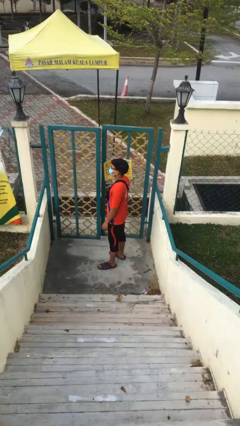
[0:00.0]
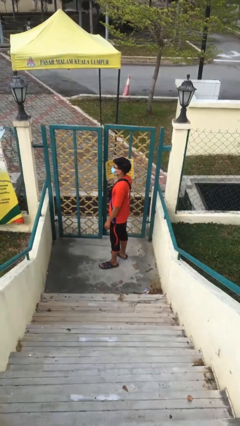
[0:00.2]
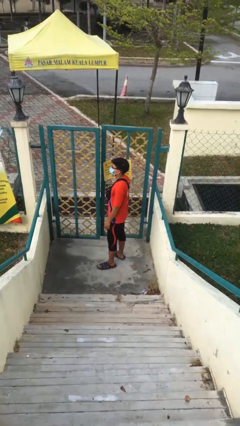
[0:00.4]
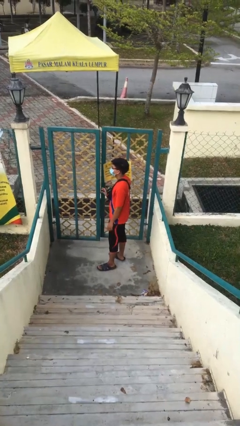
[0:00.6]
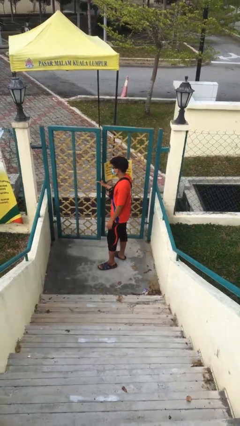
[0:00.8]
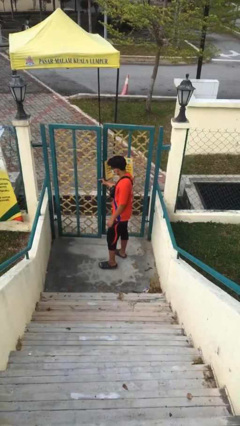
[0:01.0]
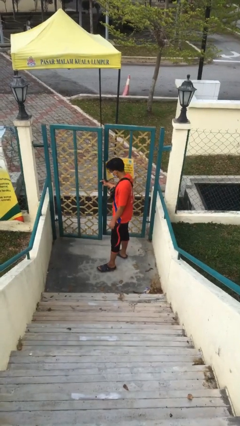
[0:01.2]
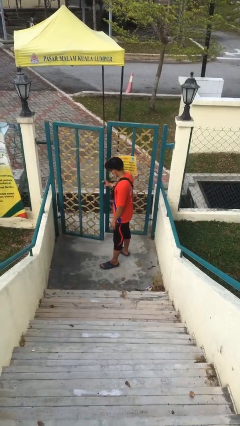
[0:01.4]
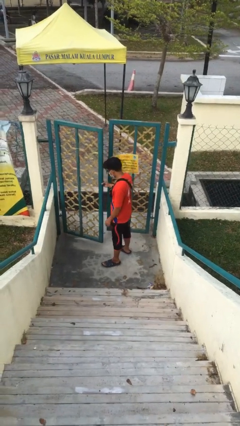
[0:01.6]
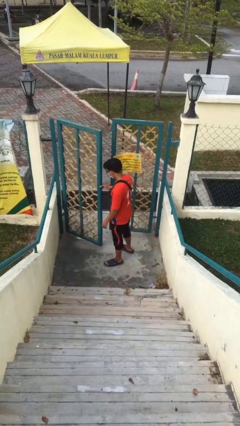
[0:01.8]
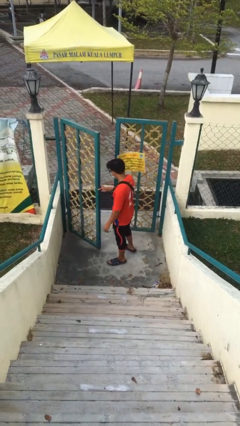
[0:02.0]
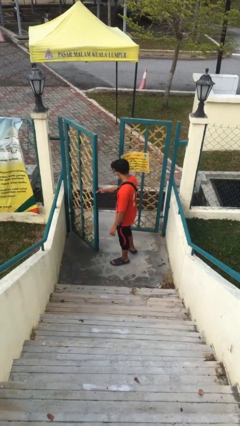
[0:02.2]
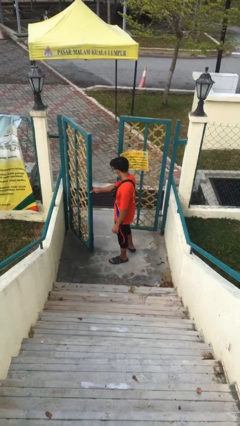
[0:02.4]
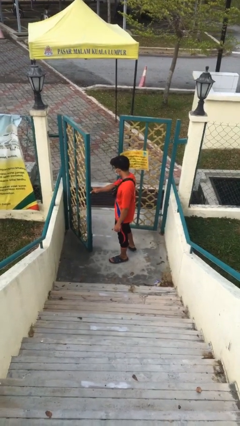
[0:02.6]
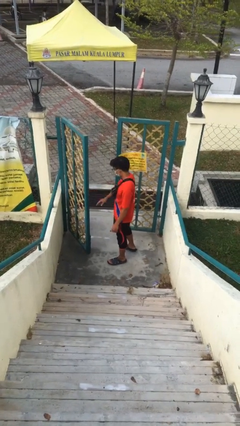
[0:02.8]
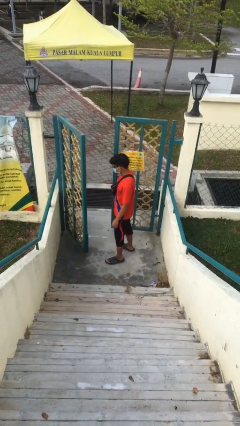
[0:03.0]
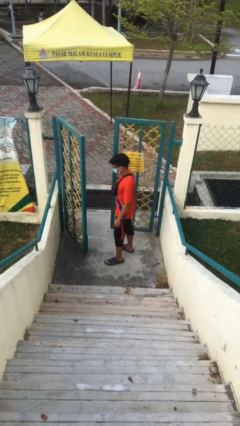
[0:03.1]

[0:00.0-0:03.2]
person opens facility door

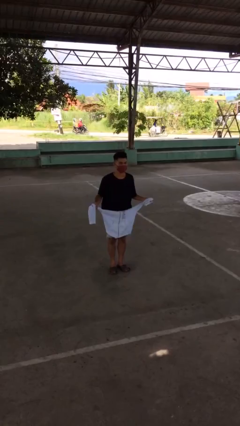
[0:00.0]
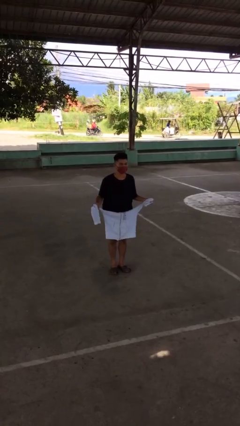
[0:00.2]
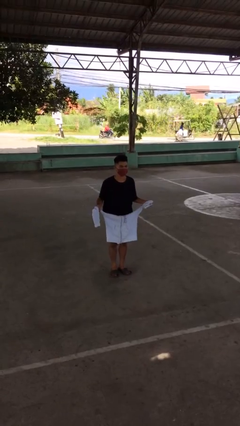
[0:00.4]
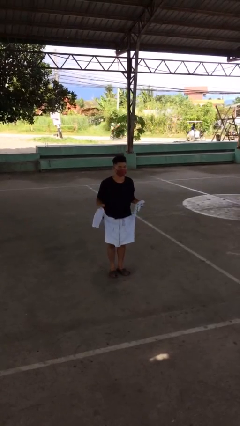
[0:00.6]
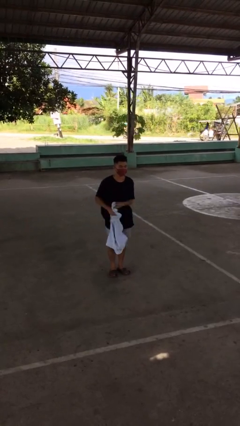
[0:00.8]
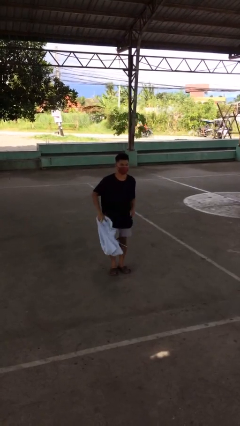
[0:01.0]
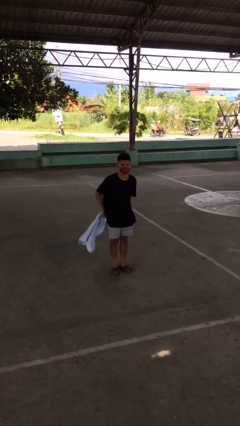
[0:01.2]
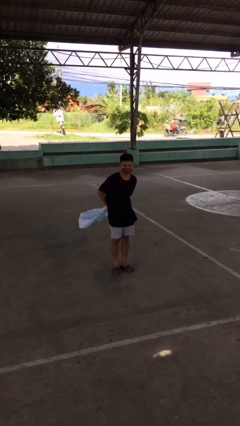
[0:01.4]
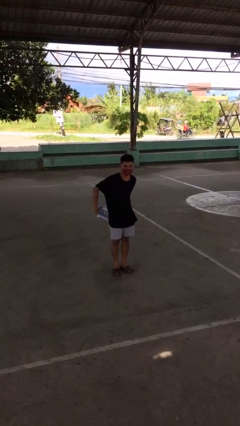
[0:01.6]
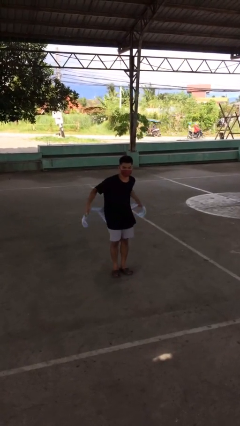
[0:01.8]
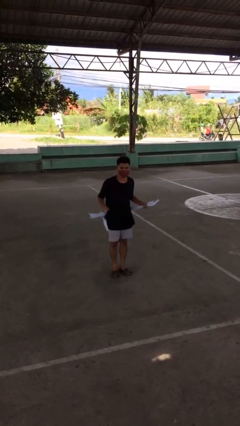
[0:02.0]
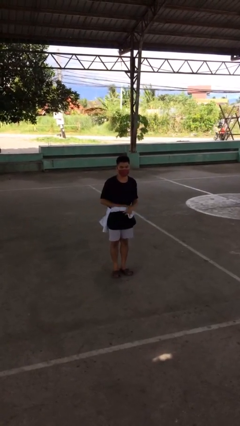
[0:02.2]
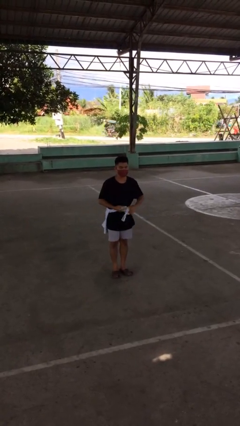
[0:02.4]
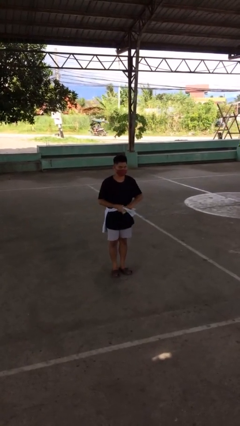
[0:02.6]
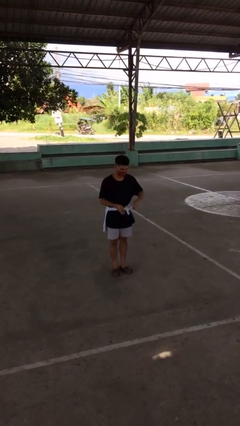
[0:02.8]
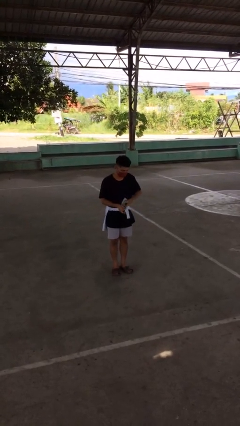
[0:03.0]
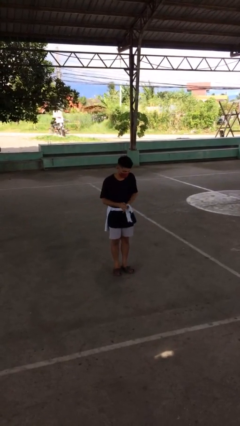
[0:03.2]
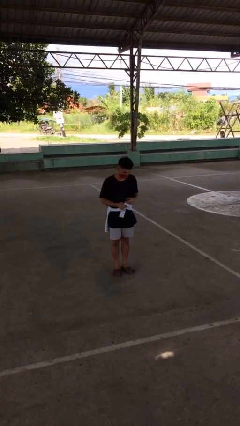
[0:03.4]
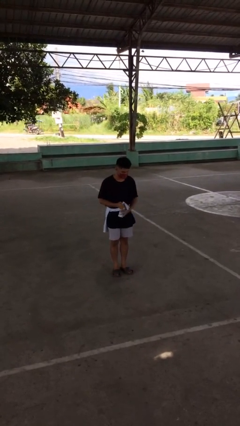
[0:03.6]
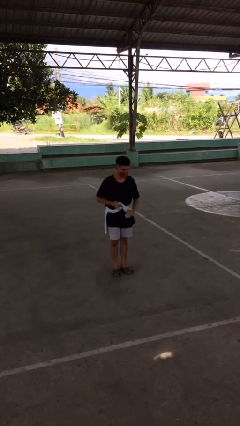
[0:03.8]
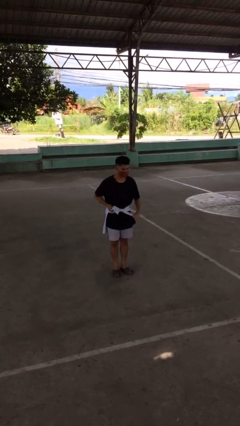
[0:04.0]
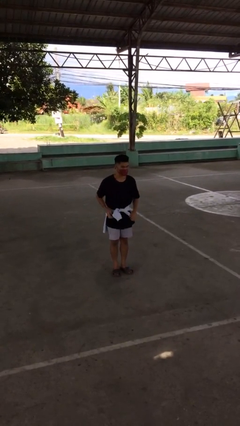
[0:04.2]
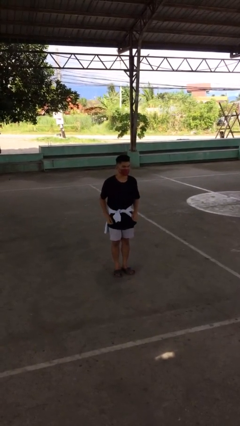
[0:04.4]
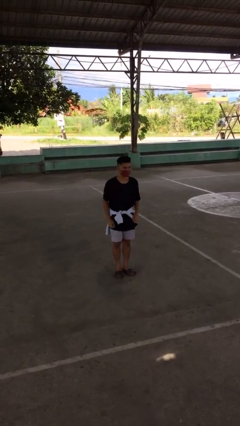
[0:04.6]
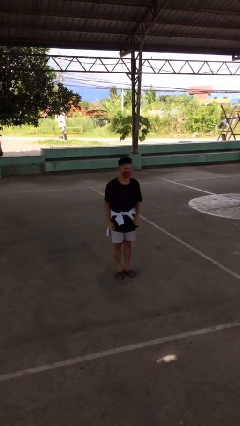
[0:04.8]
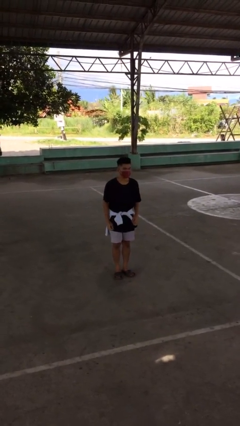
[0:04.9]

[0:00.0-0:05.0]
person ties jacket around waist

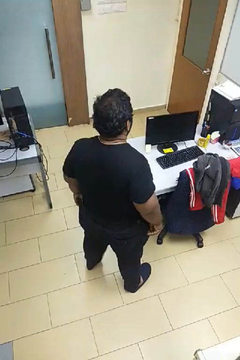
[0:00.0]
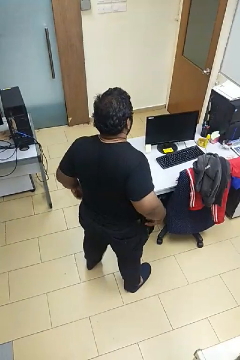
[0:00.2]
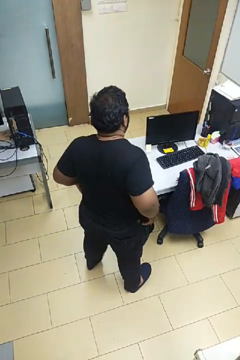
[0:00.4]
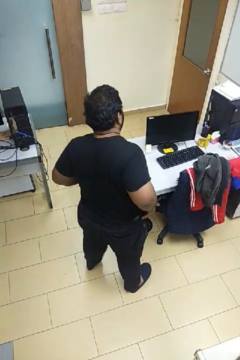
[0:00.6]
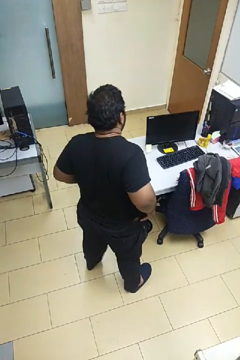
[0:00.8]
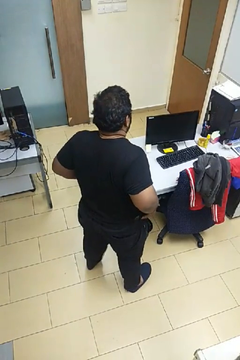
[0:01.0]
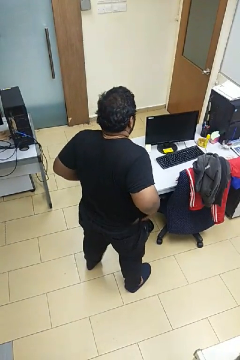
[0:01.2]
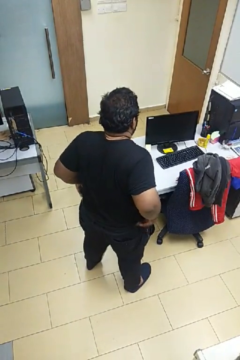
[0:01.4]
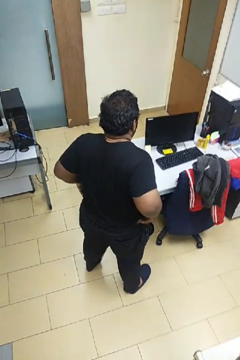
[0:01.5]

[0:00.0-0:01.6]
person hikes up pants

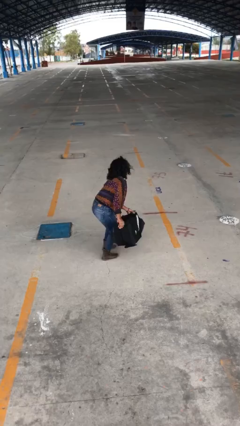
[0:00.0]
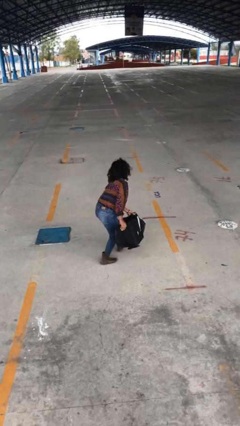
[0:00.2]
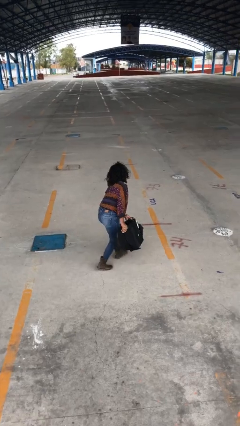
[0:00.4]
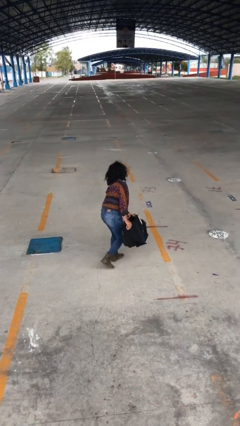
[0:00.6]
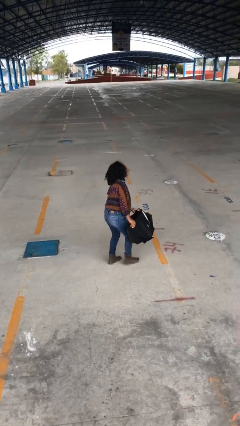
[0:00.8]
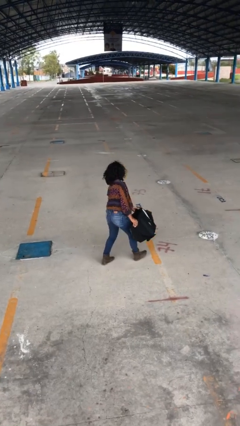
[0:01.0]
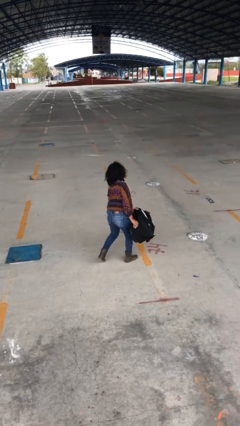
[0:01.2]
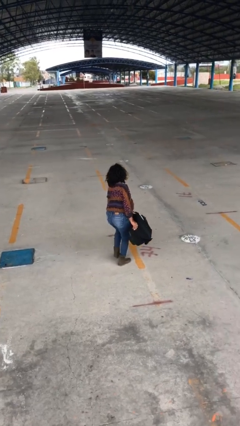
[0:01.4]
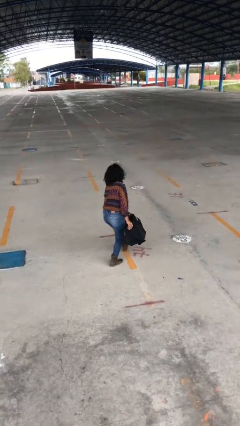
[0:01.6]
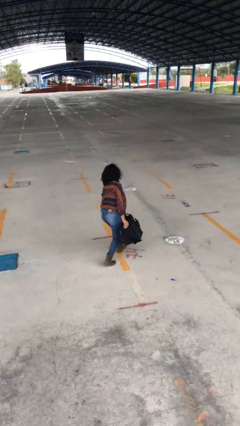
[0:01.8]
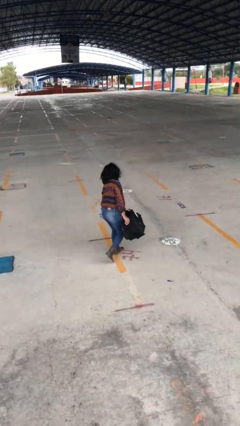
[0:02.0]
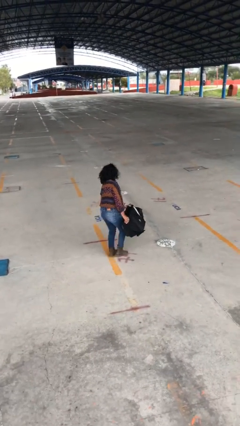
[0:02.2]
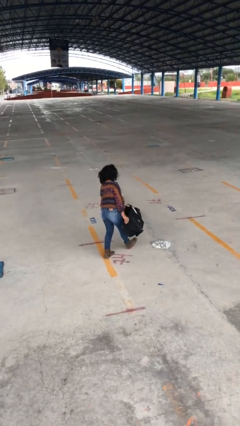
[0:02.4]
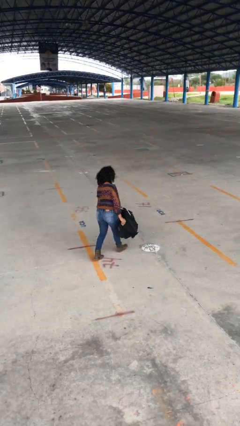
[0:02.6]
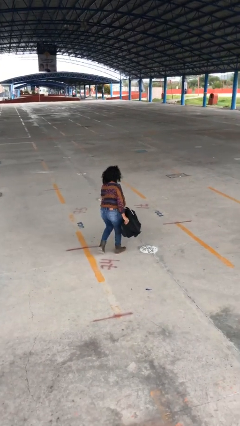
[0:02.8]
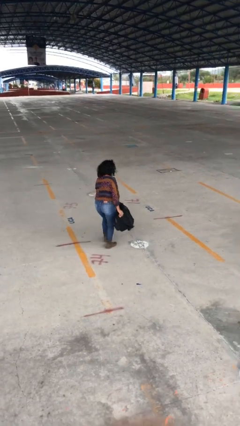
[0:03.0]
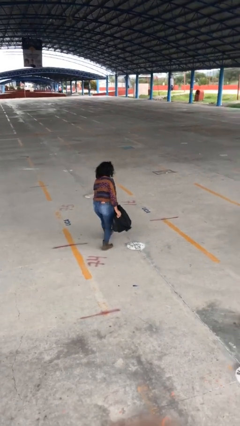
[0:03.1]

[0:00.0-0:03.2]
person carries heavy object

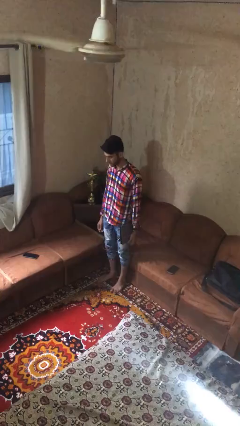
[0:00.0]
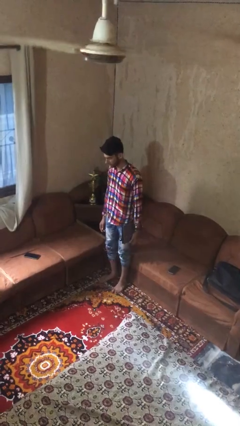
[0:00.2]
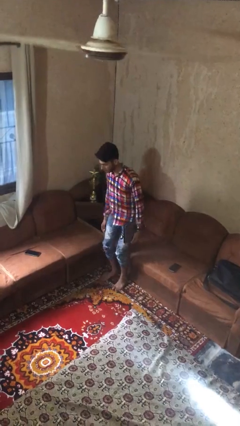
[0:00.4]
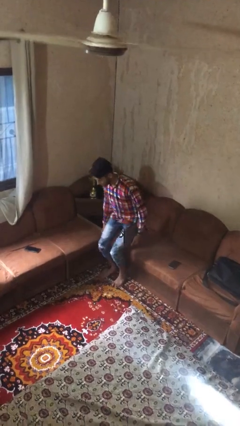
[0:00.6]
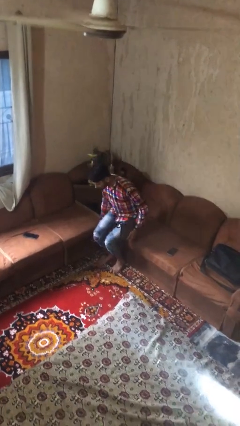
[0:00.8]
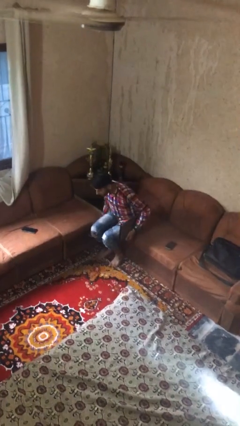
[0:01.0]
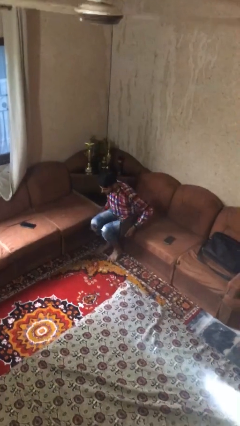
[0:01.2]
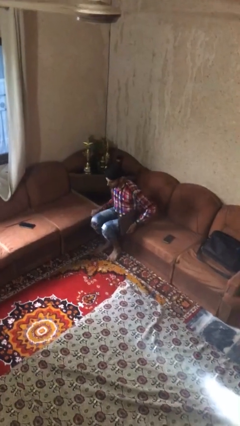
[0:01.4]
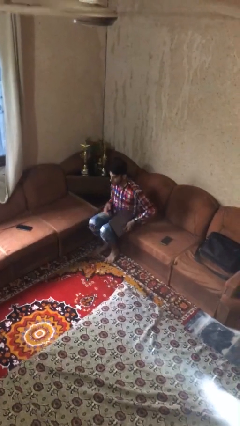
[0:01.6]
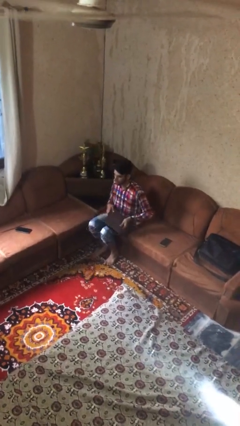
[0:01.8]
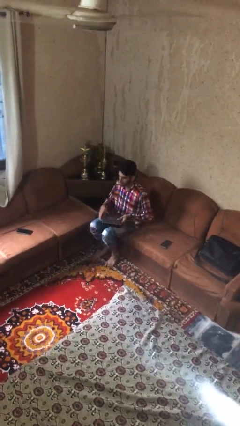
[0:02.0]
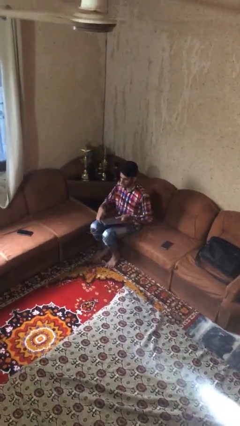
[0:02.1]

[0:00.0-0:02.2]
person sits down

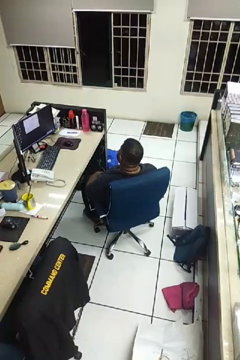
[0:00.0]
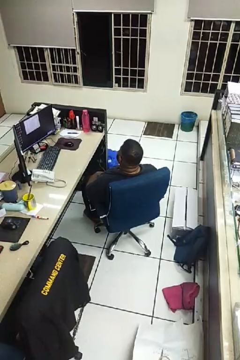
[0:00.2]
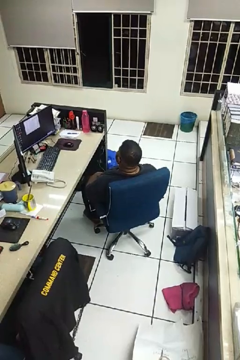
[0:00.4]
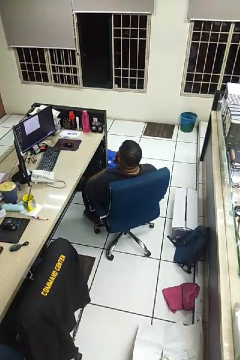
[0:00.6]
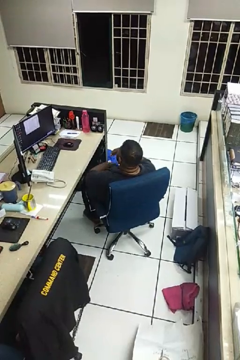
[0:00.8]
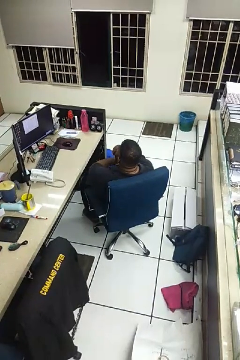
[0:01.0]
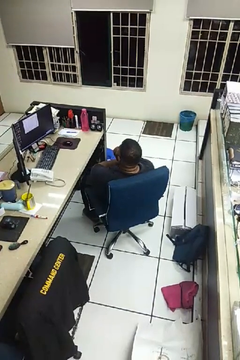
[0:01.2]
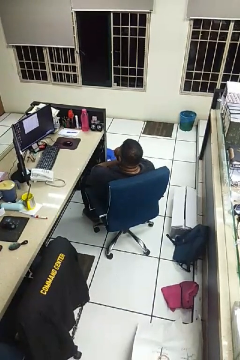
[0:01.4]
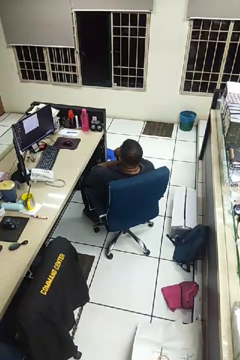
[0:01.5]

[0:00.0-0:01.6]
person strokes chin

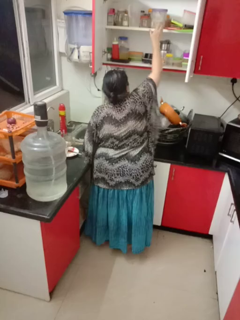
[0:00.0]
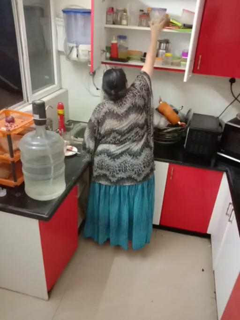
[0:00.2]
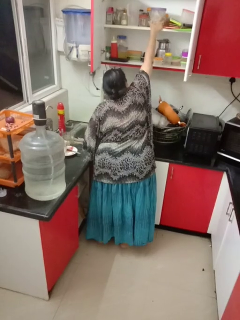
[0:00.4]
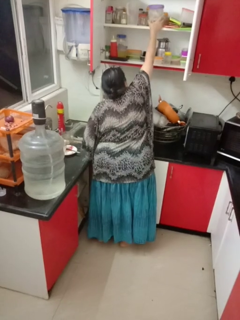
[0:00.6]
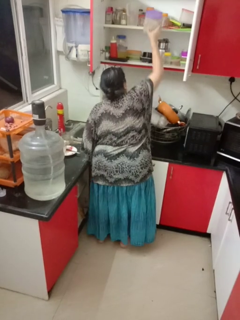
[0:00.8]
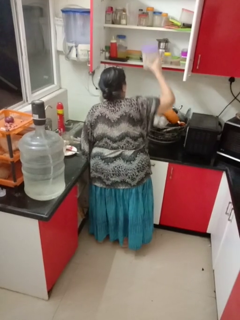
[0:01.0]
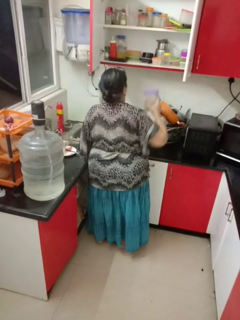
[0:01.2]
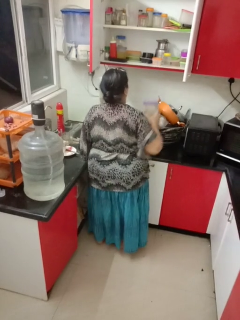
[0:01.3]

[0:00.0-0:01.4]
person takes object from cabinet

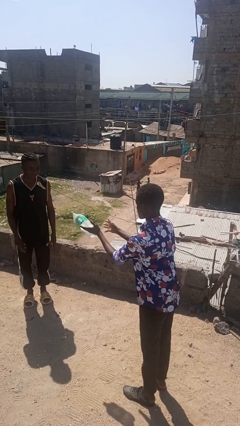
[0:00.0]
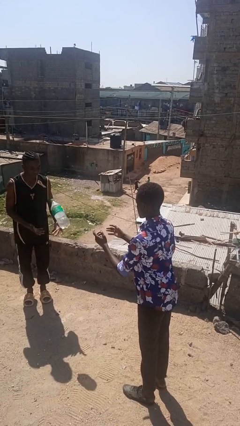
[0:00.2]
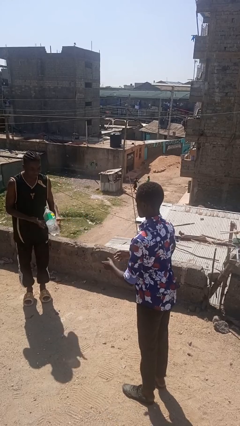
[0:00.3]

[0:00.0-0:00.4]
person throws object to person
